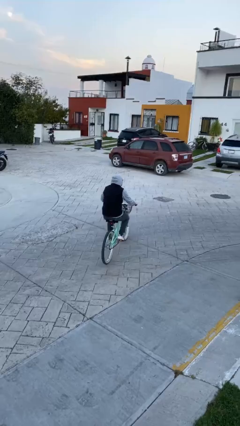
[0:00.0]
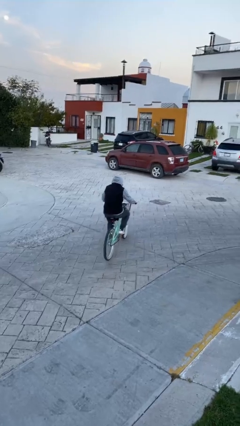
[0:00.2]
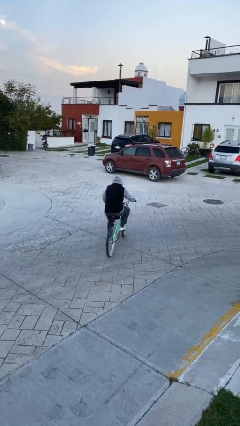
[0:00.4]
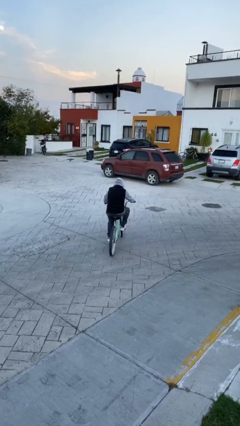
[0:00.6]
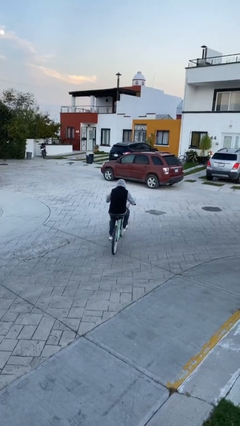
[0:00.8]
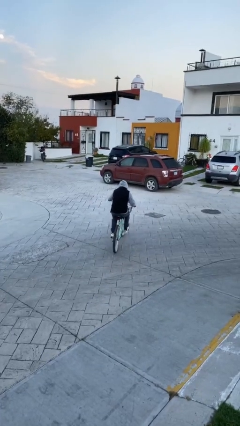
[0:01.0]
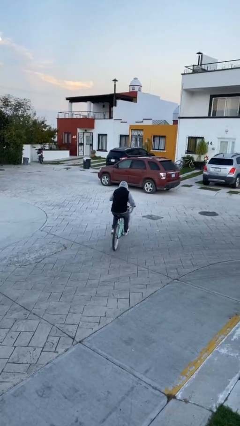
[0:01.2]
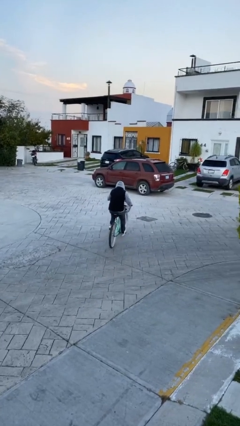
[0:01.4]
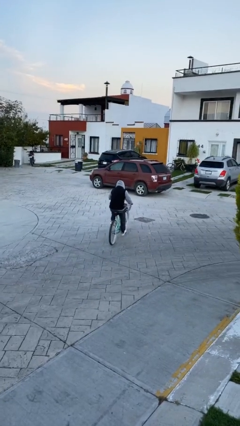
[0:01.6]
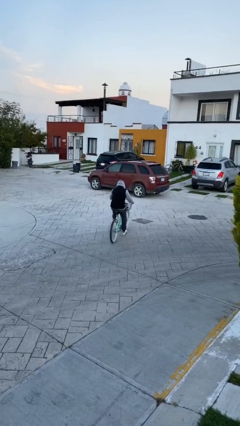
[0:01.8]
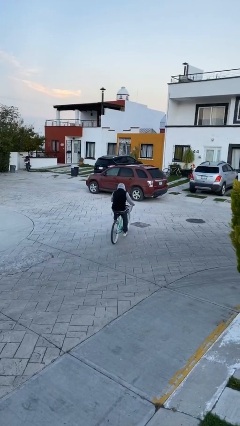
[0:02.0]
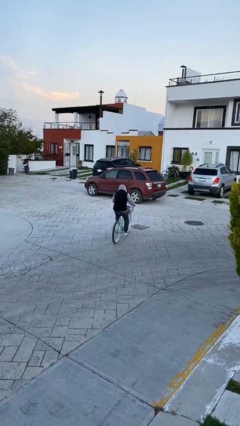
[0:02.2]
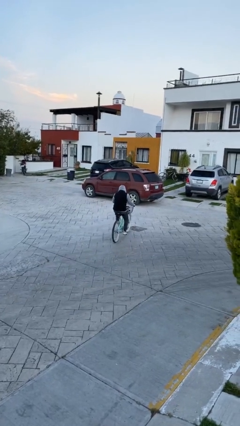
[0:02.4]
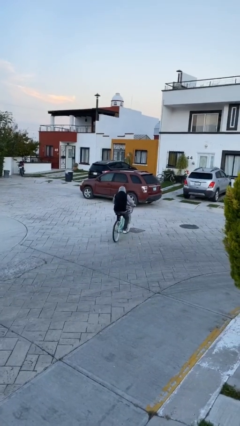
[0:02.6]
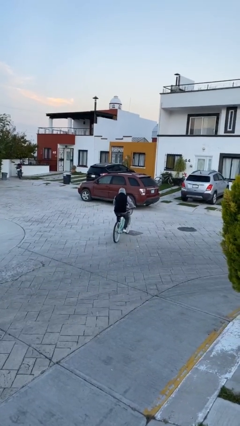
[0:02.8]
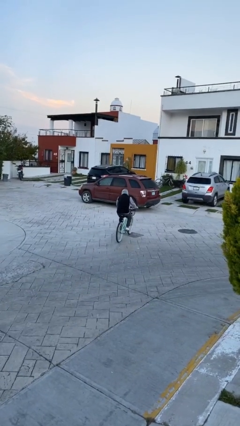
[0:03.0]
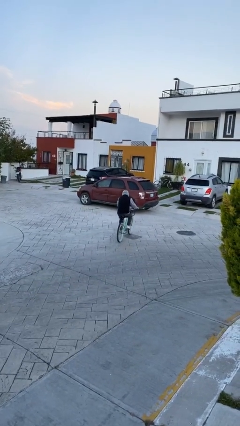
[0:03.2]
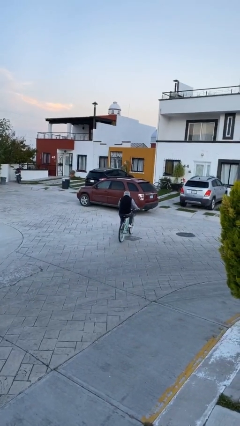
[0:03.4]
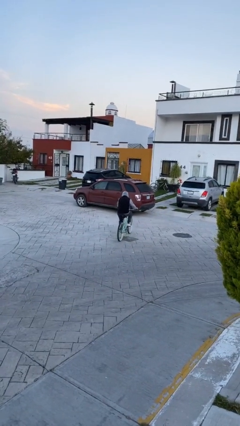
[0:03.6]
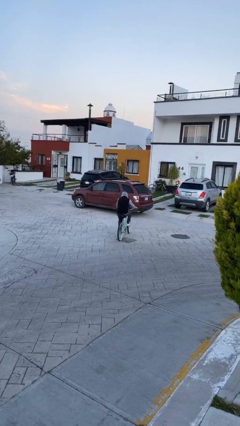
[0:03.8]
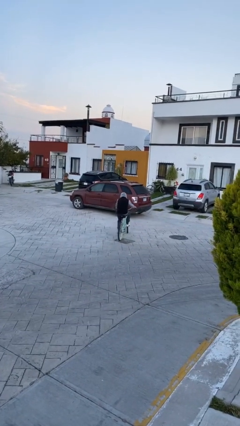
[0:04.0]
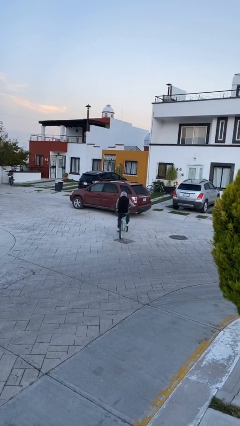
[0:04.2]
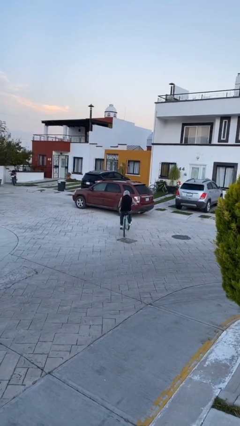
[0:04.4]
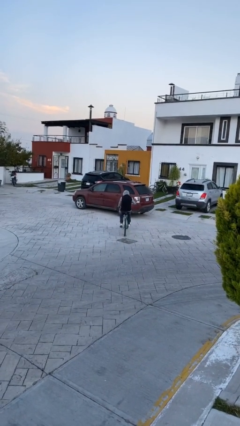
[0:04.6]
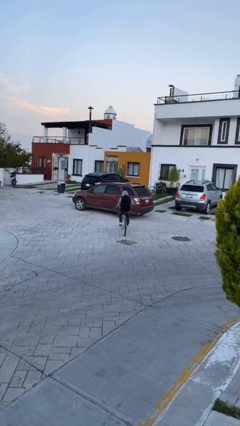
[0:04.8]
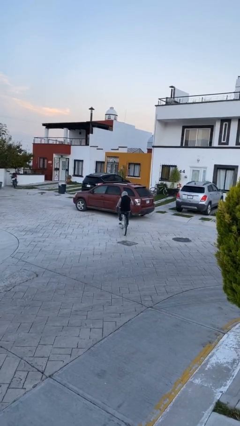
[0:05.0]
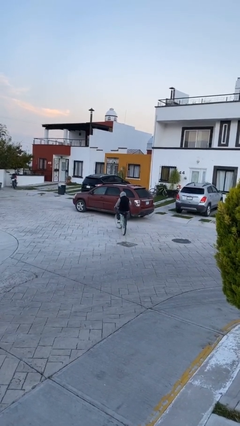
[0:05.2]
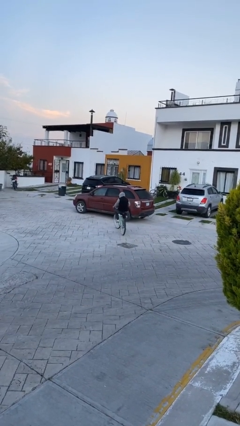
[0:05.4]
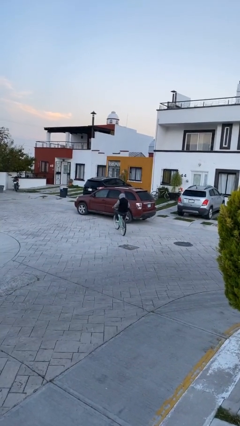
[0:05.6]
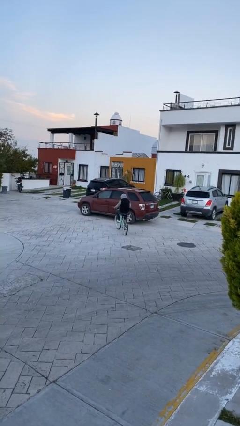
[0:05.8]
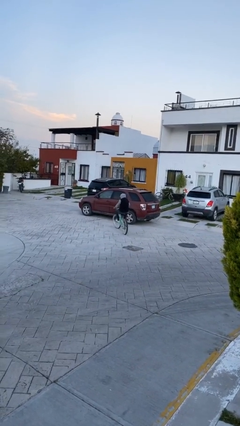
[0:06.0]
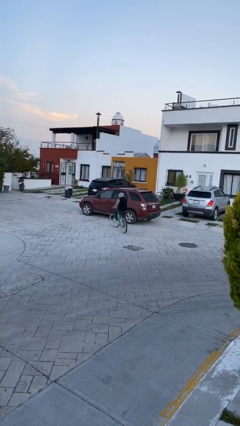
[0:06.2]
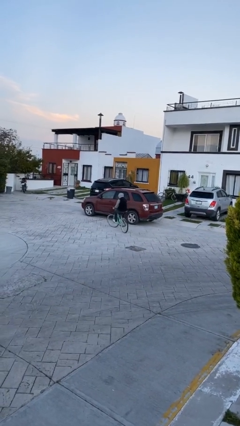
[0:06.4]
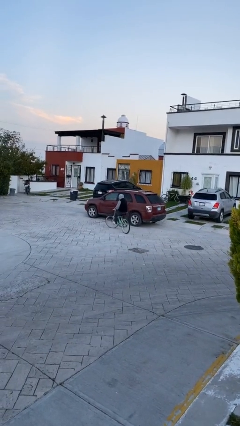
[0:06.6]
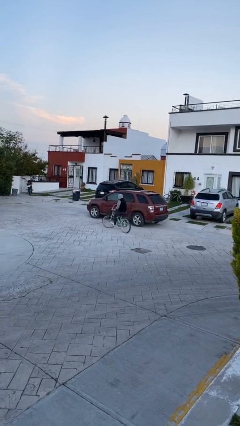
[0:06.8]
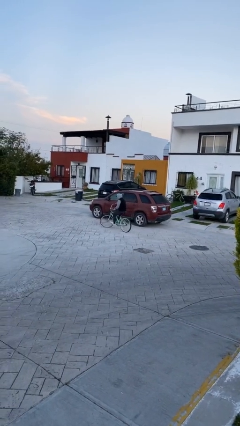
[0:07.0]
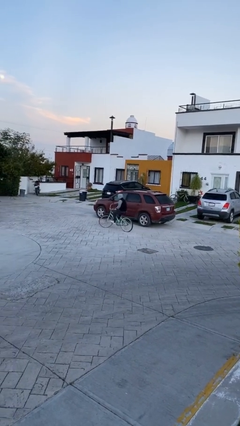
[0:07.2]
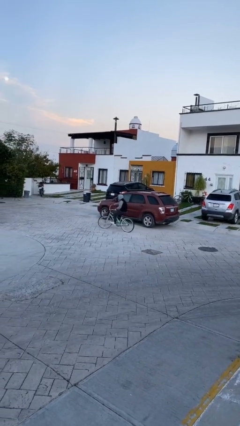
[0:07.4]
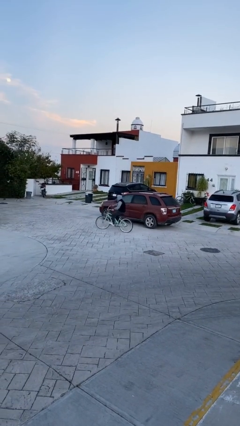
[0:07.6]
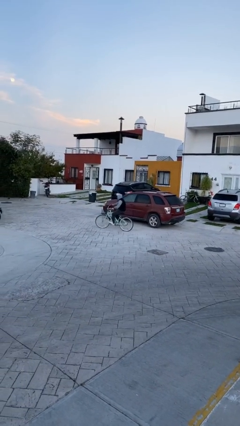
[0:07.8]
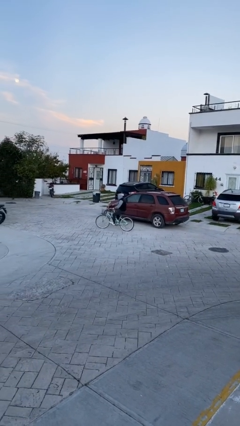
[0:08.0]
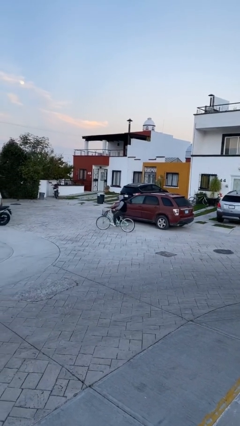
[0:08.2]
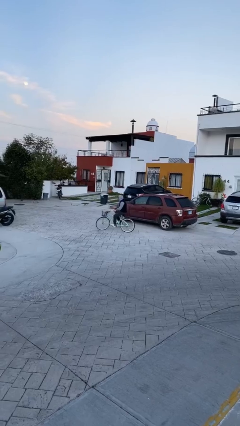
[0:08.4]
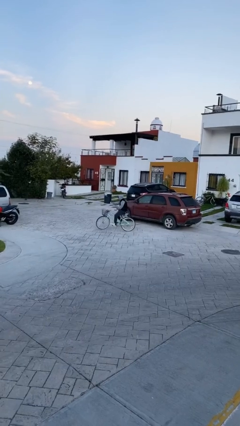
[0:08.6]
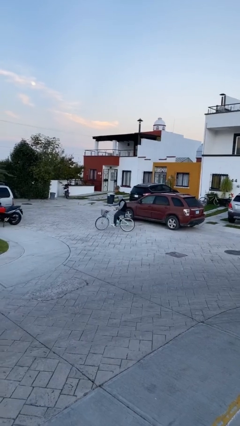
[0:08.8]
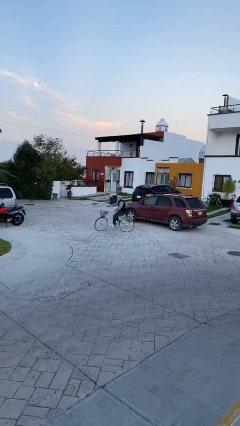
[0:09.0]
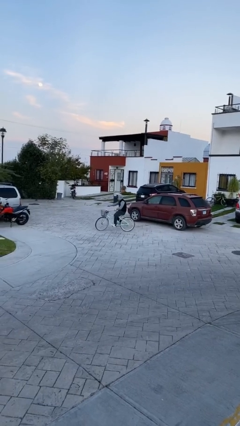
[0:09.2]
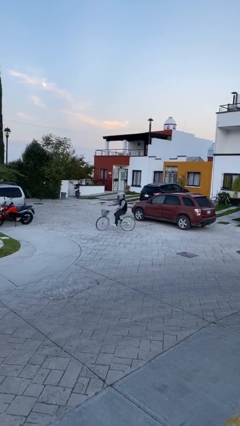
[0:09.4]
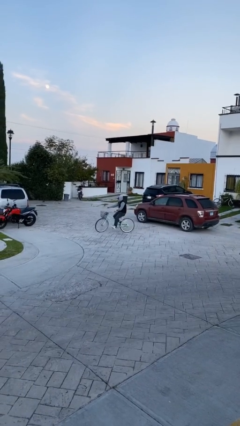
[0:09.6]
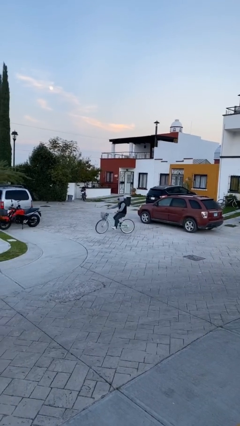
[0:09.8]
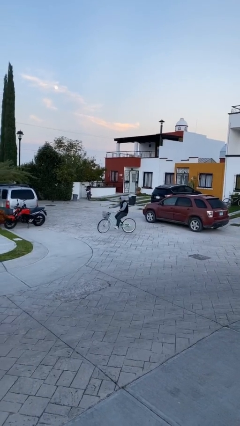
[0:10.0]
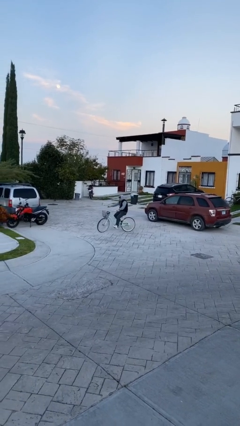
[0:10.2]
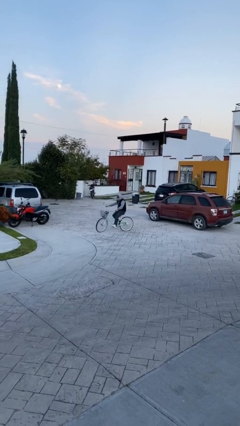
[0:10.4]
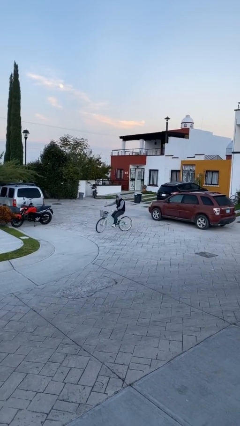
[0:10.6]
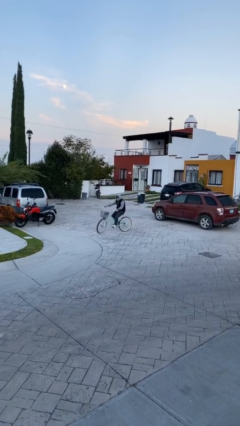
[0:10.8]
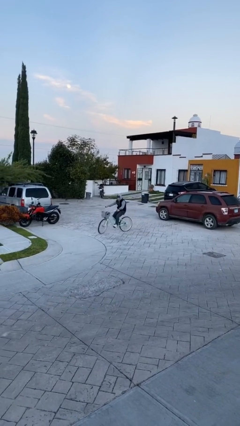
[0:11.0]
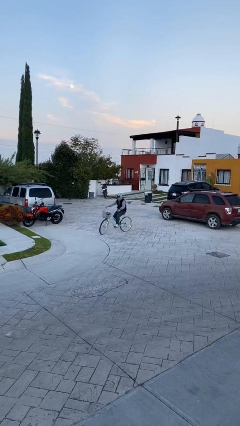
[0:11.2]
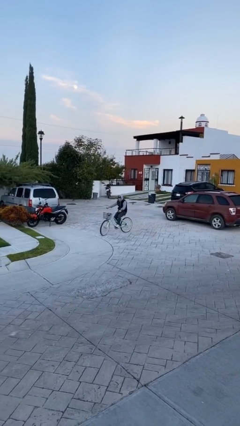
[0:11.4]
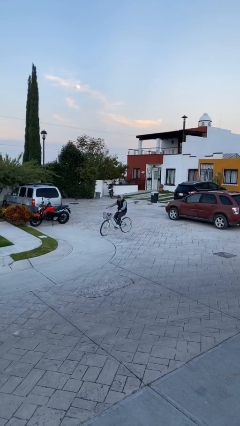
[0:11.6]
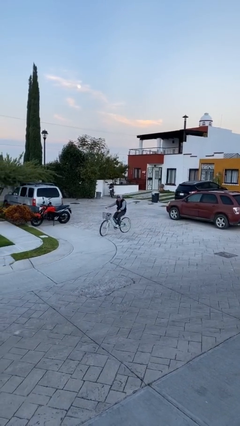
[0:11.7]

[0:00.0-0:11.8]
person rides bicycle

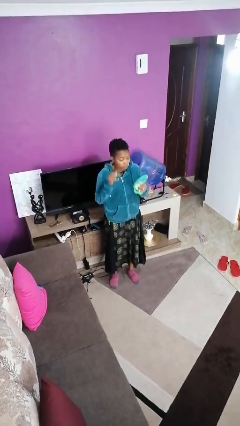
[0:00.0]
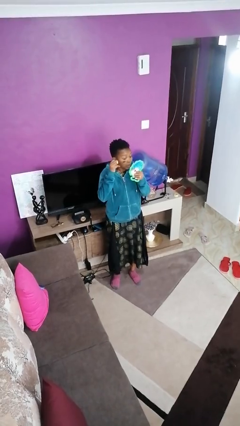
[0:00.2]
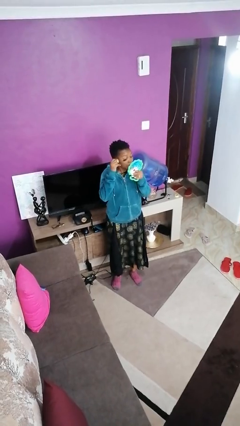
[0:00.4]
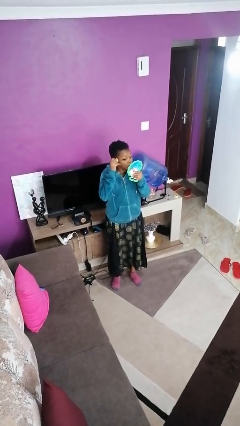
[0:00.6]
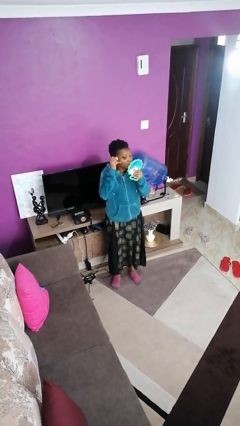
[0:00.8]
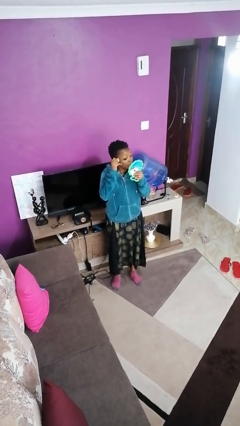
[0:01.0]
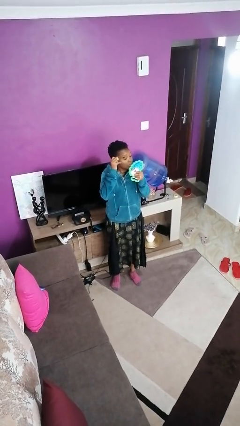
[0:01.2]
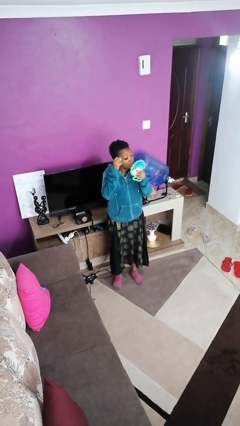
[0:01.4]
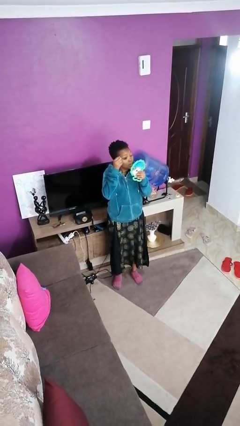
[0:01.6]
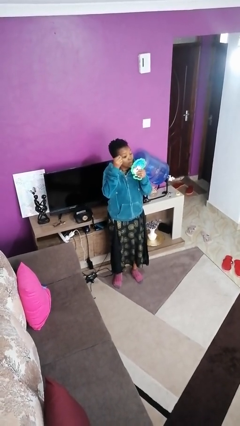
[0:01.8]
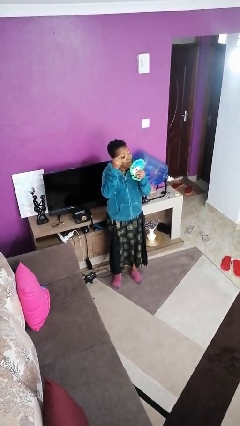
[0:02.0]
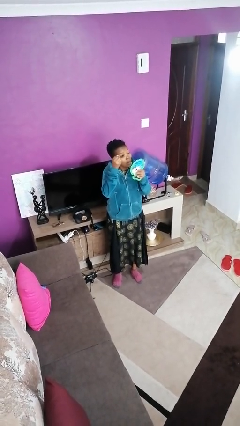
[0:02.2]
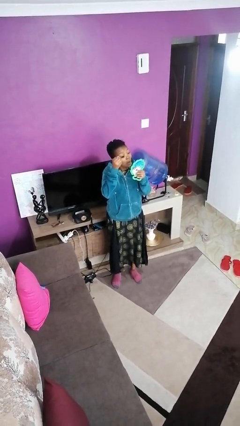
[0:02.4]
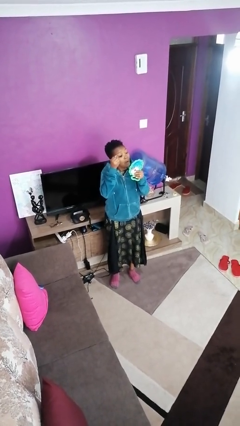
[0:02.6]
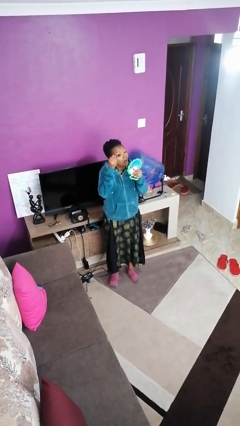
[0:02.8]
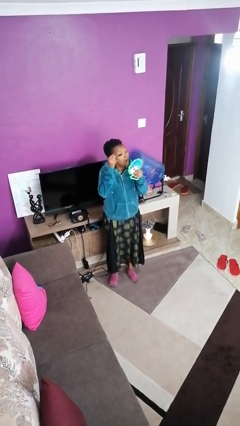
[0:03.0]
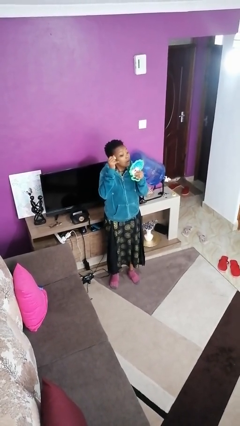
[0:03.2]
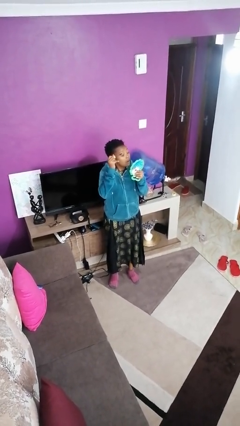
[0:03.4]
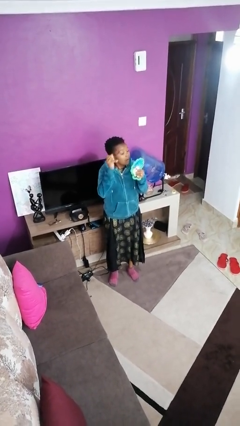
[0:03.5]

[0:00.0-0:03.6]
person applies eye makeup

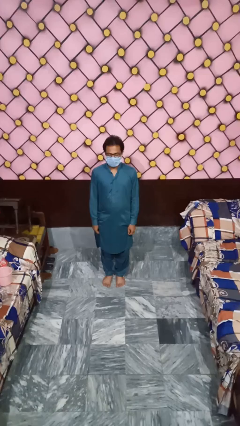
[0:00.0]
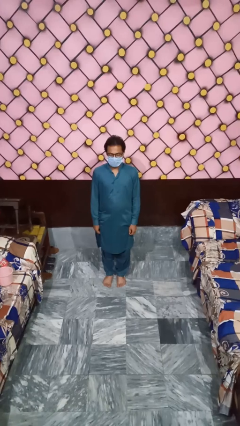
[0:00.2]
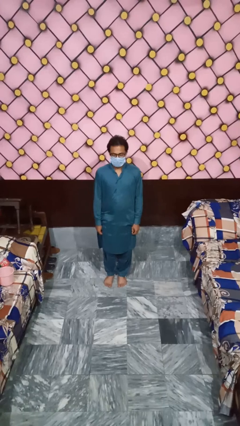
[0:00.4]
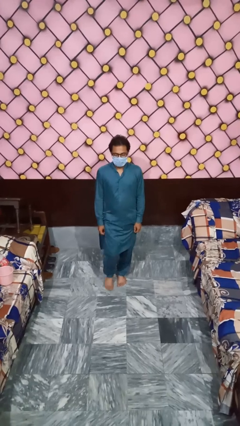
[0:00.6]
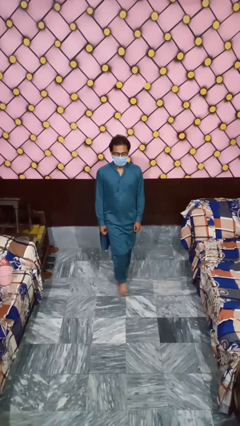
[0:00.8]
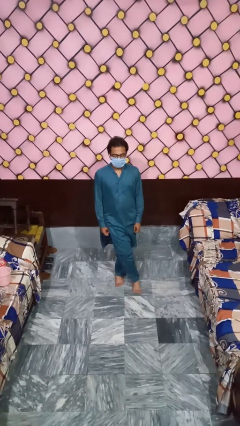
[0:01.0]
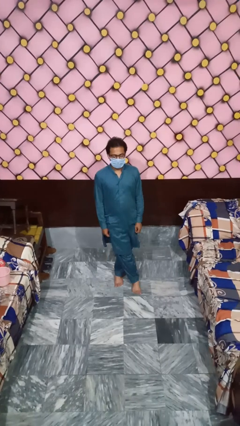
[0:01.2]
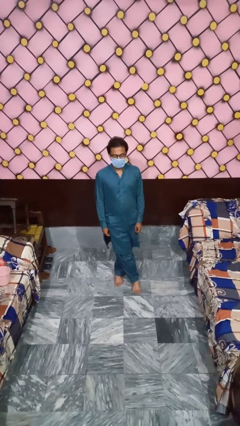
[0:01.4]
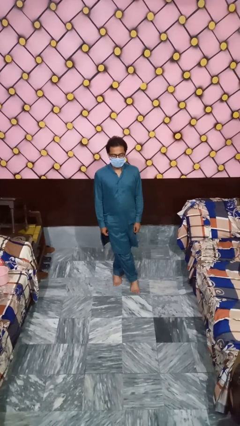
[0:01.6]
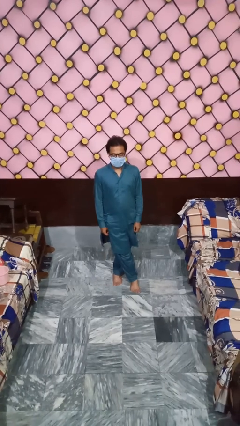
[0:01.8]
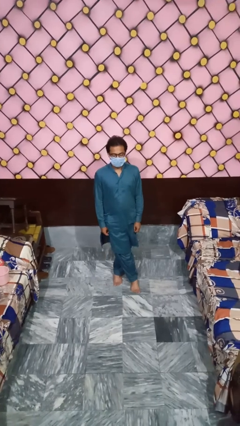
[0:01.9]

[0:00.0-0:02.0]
person crosses legs

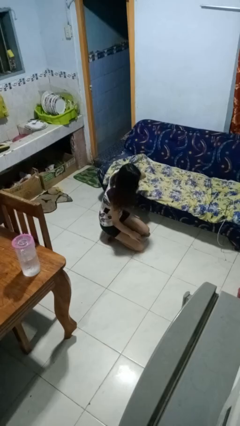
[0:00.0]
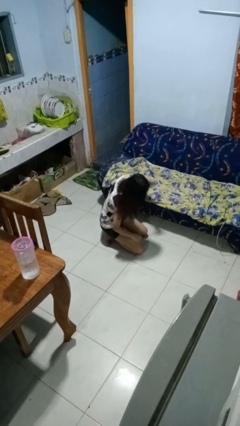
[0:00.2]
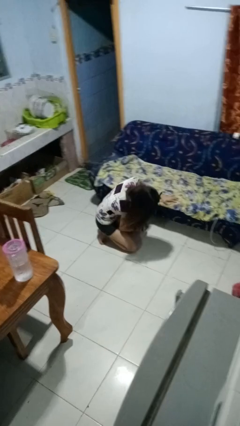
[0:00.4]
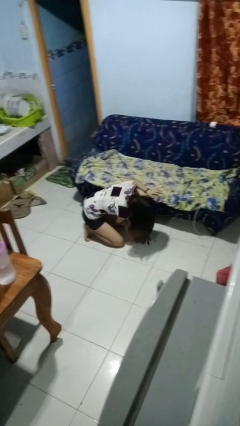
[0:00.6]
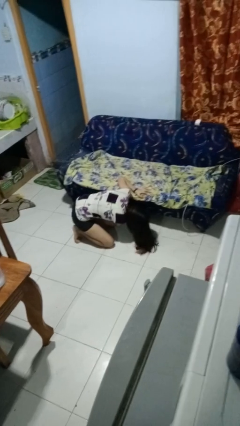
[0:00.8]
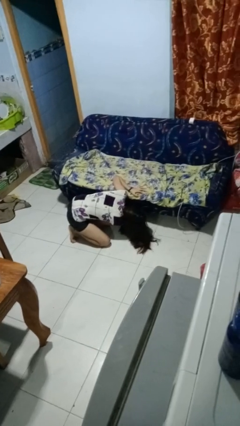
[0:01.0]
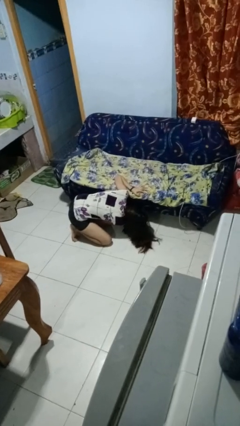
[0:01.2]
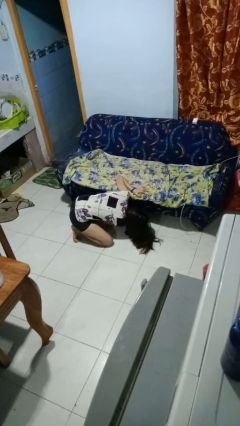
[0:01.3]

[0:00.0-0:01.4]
person searches under couch
